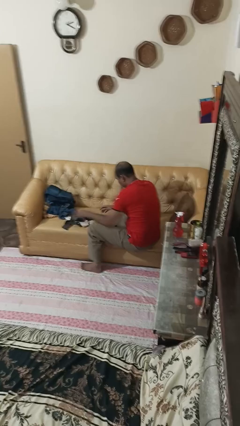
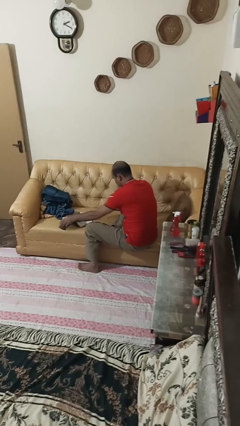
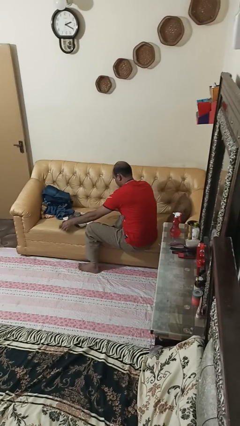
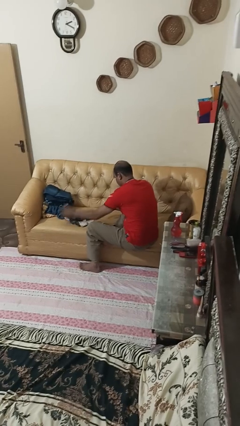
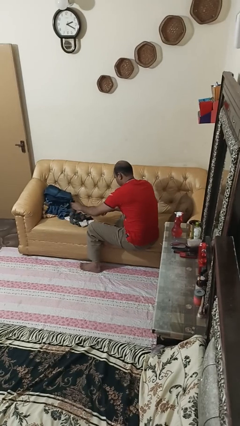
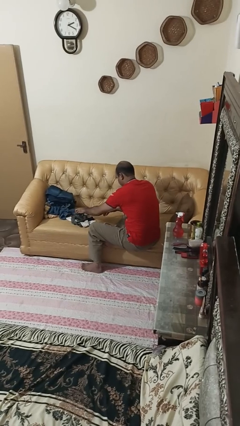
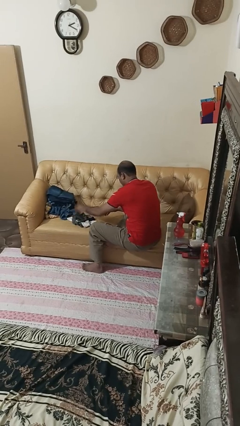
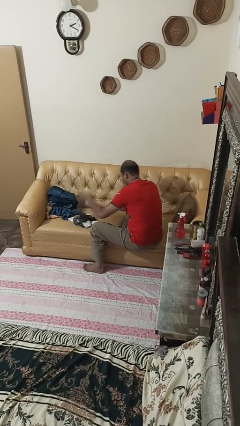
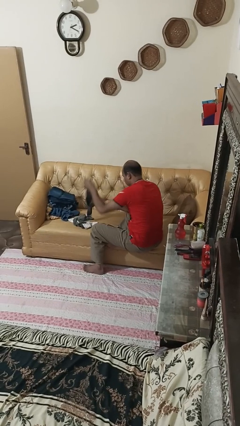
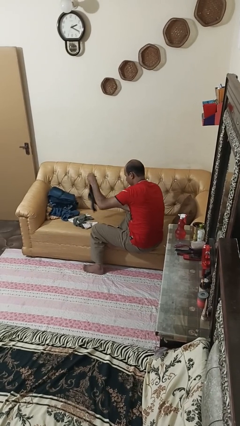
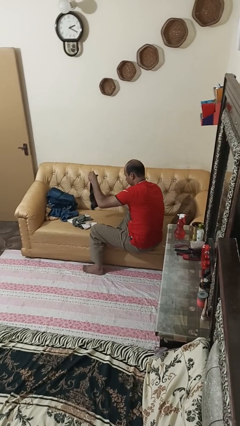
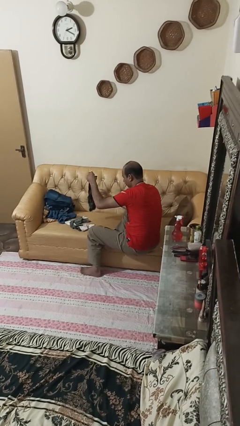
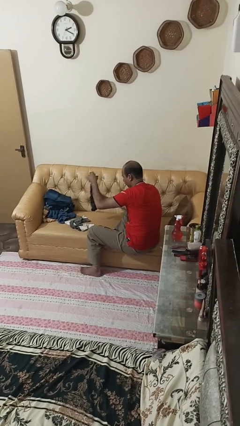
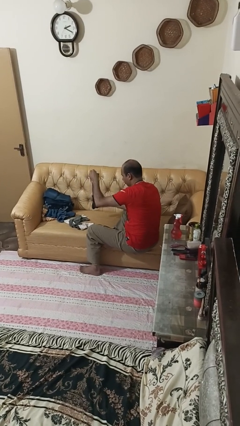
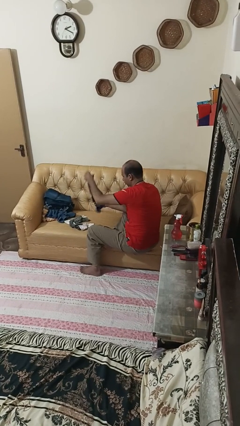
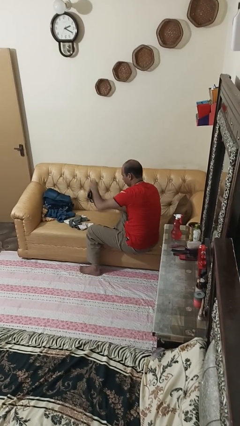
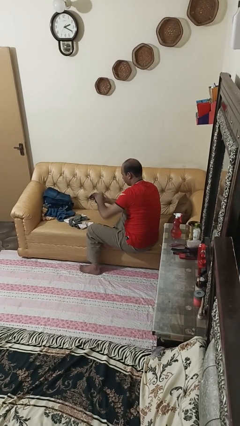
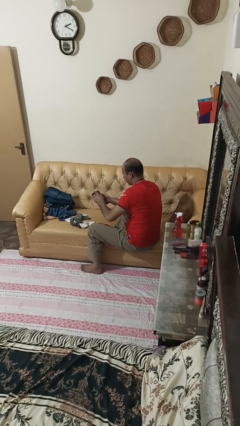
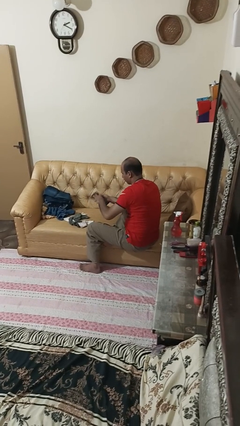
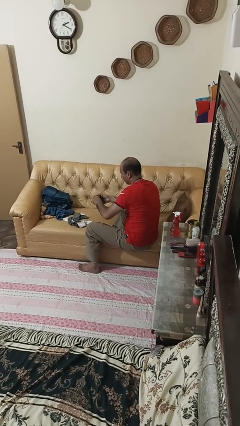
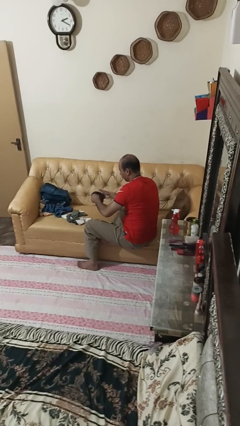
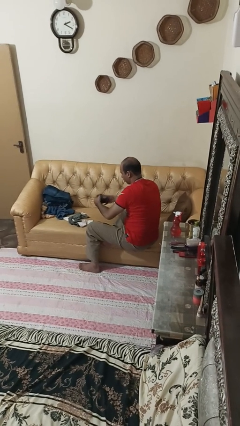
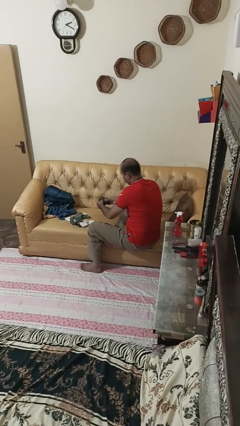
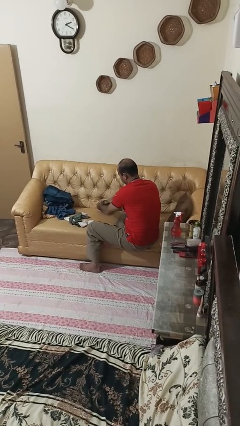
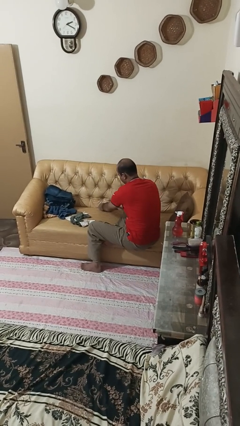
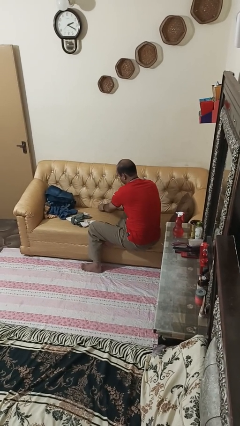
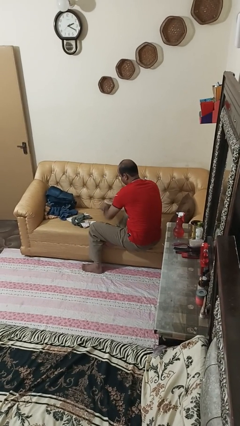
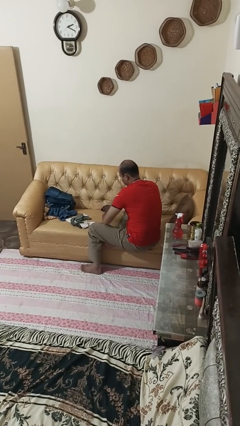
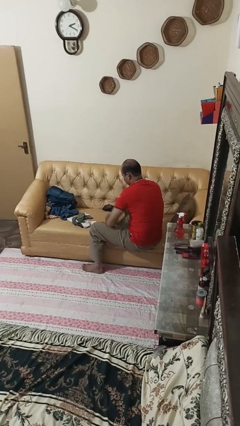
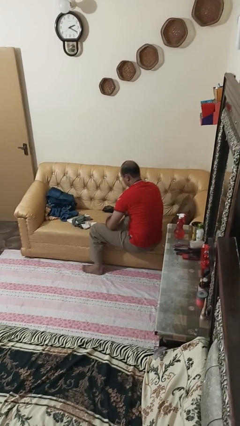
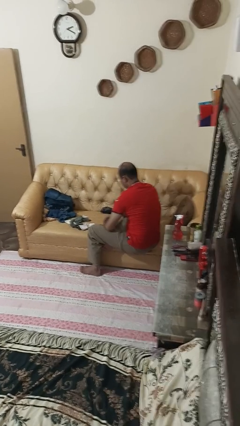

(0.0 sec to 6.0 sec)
person folds socks

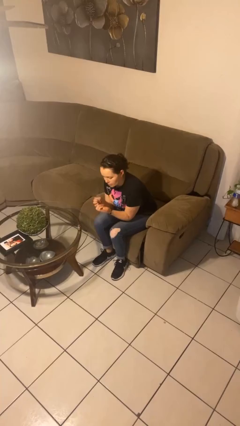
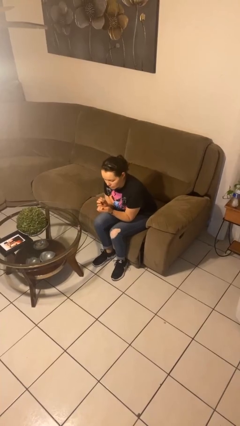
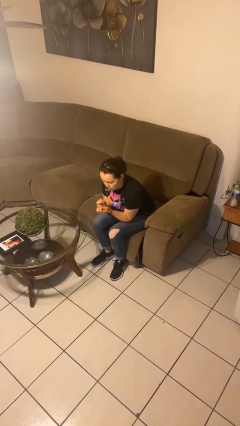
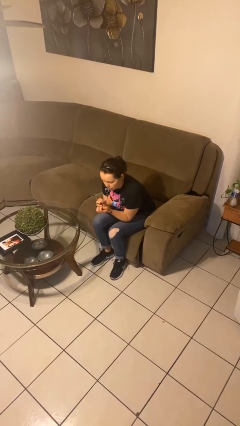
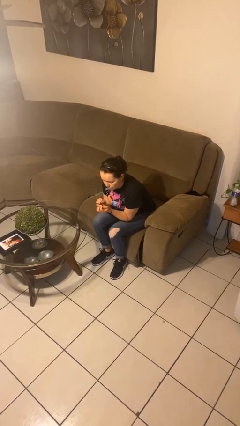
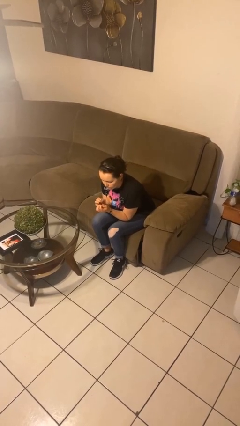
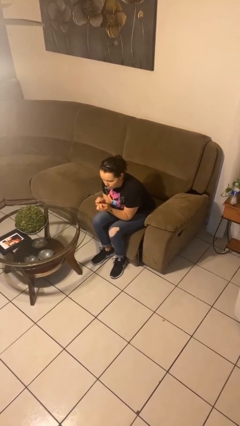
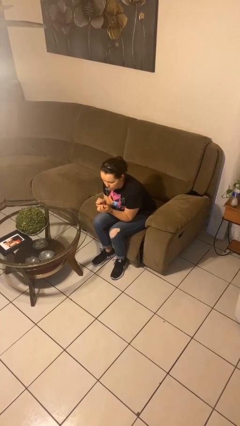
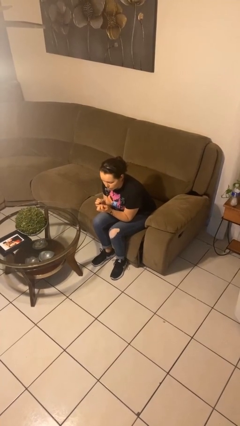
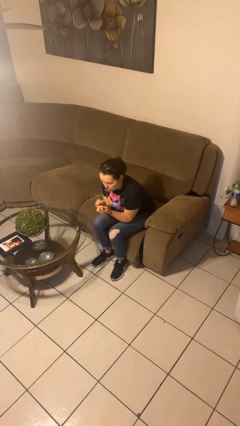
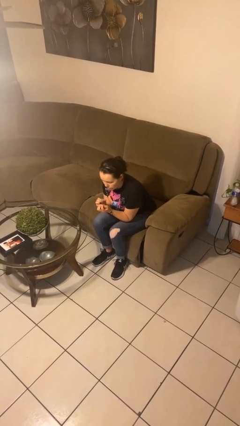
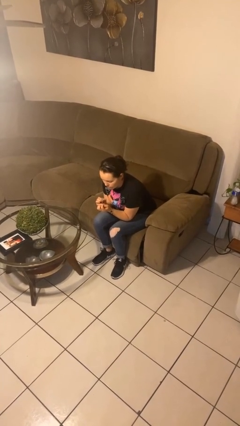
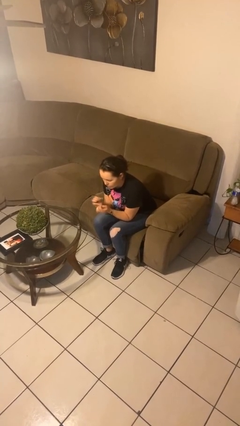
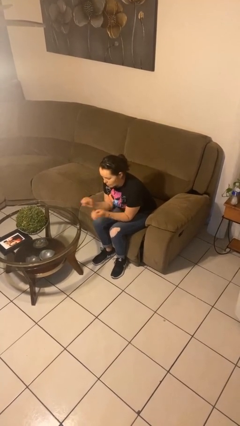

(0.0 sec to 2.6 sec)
person paints fingernails

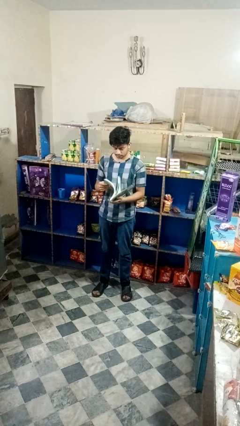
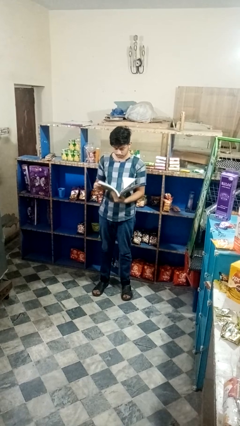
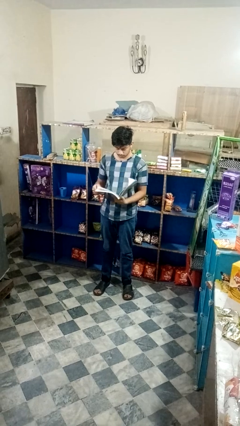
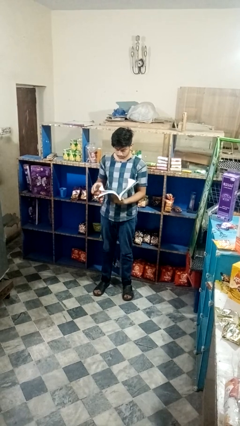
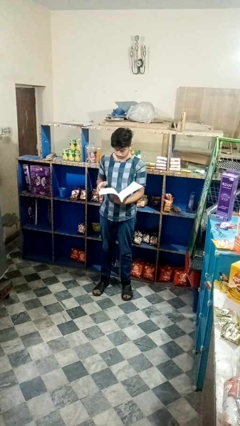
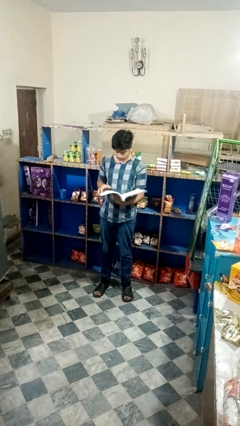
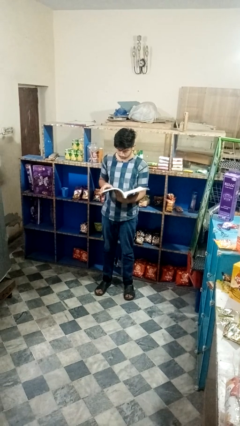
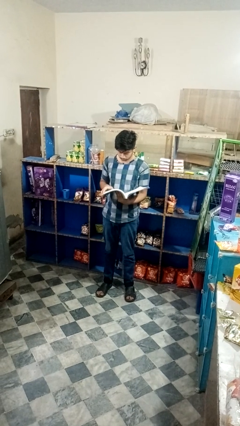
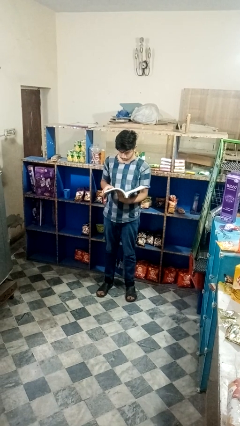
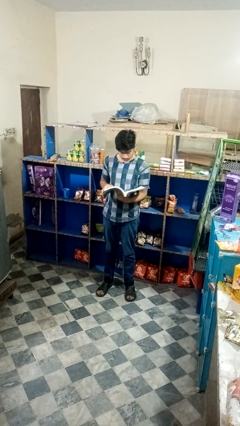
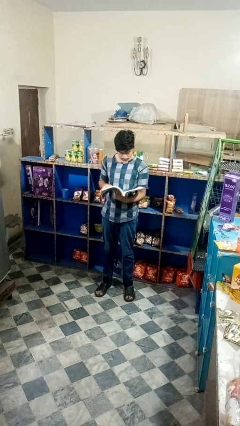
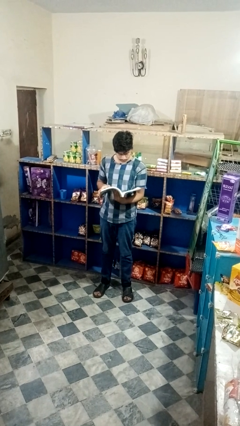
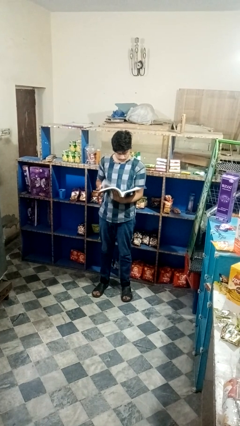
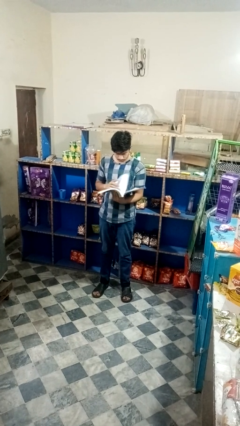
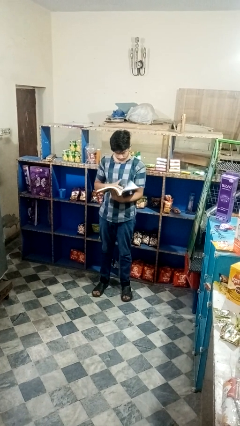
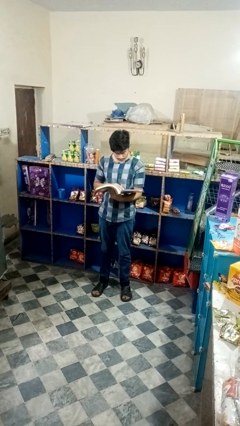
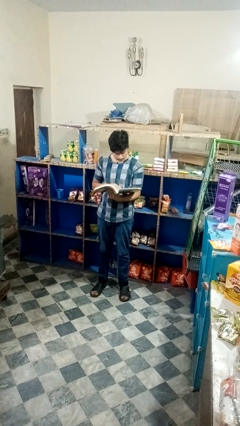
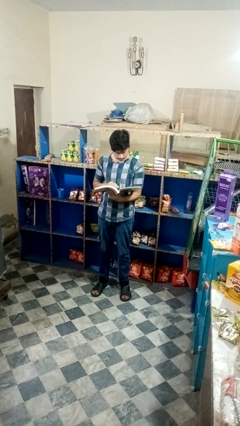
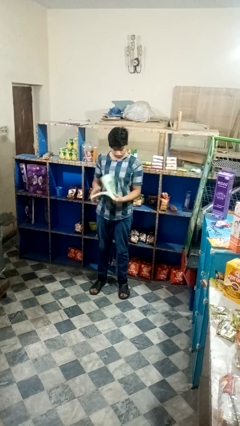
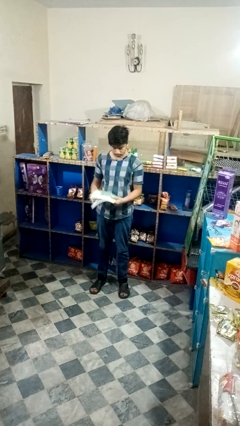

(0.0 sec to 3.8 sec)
person reads magazine

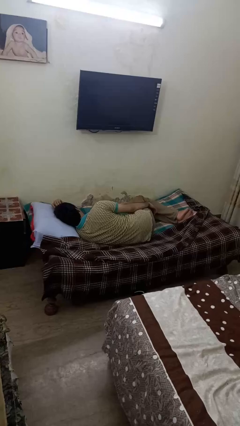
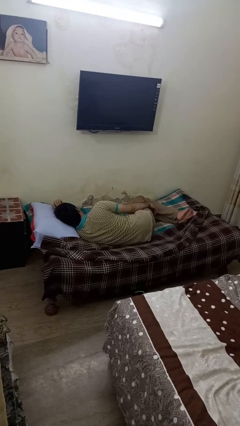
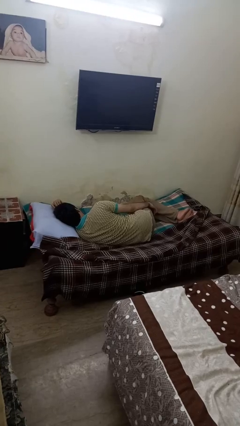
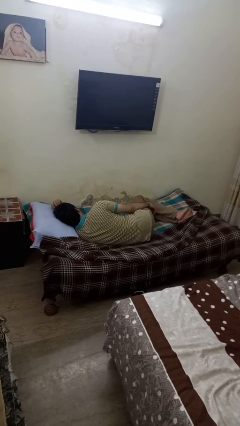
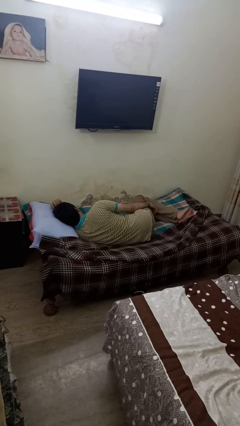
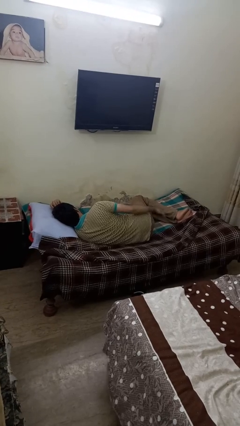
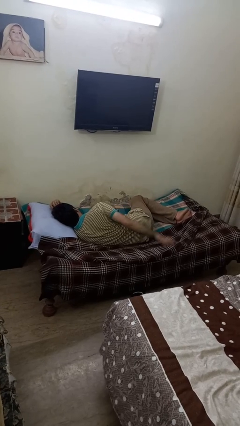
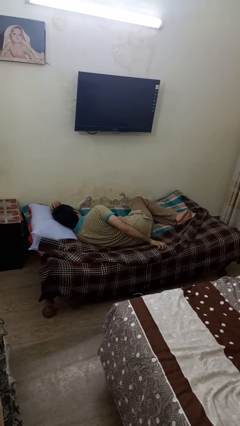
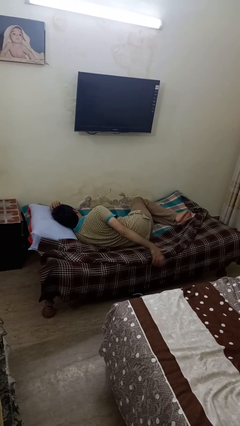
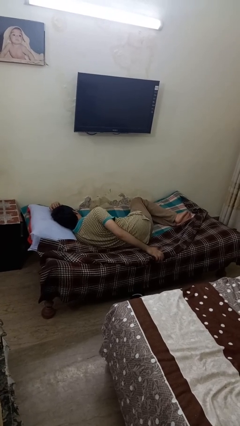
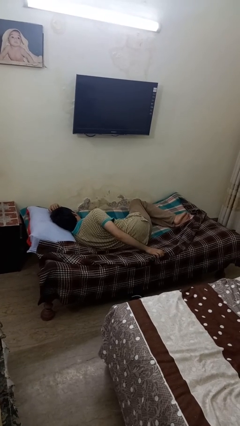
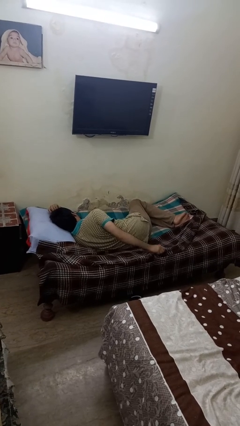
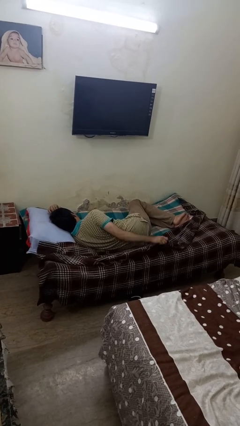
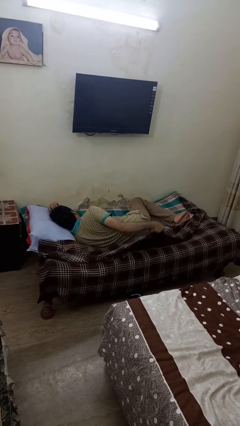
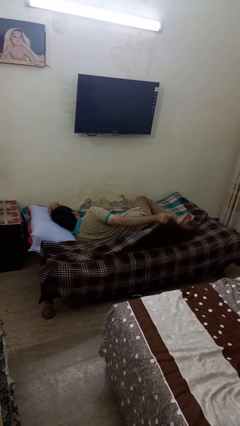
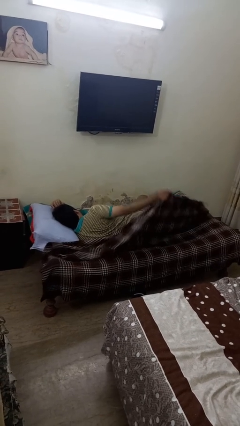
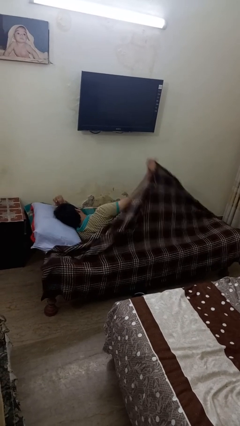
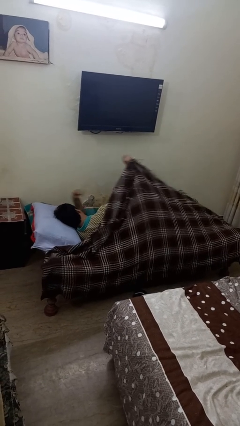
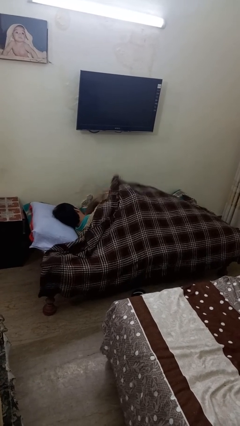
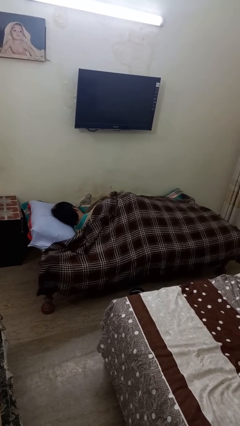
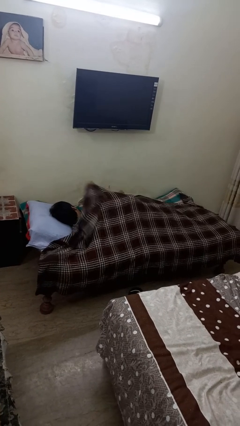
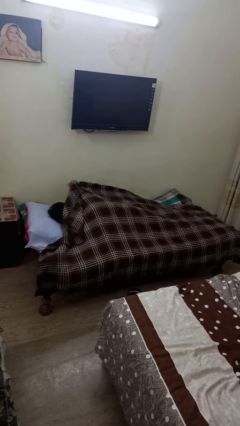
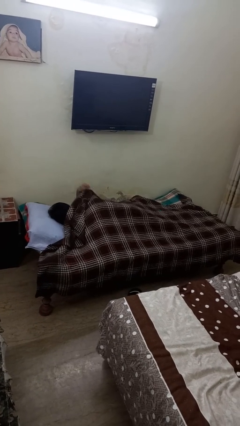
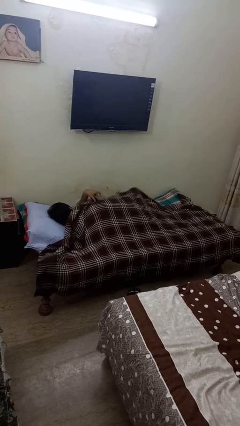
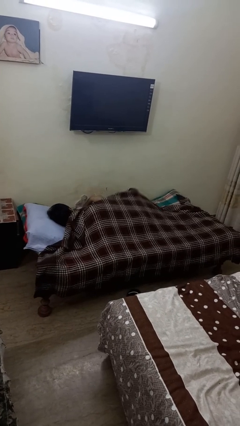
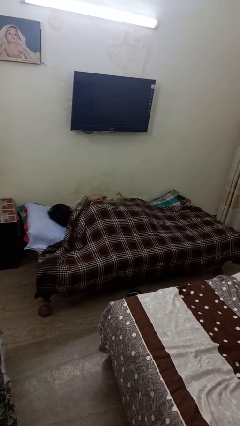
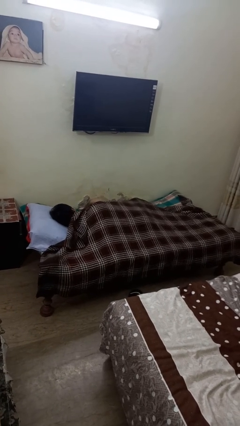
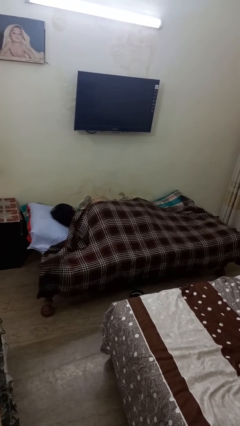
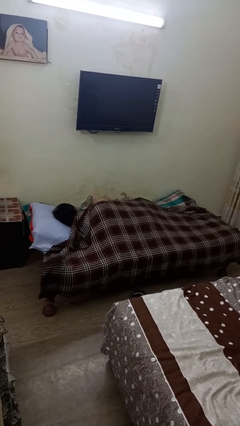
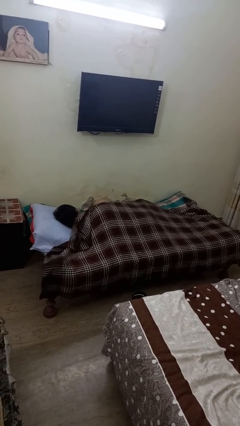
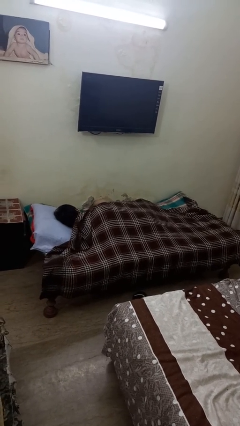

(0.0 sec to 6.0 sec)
person covers with bedsheets
